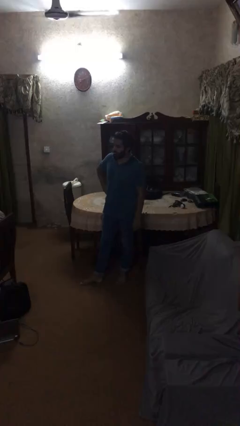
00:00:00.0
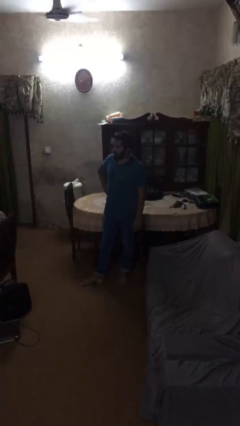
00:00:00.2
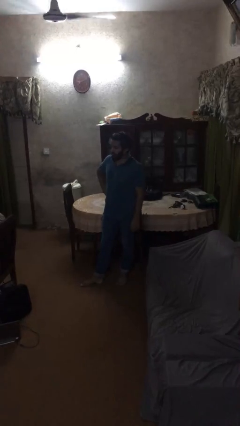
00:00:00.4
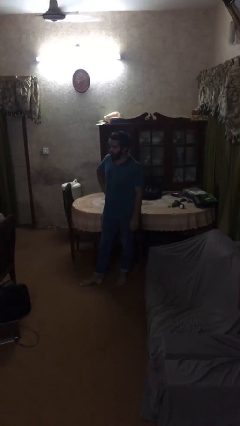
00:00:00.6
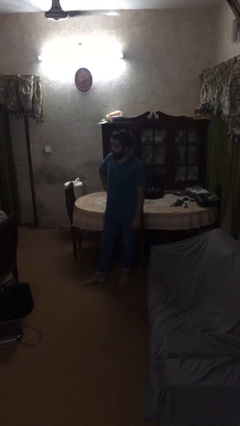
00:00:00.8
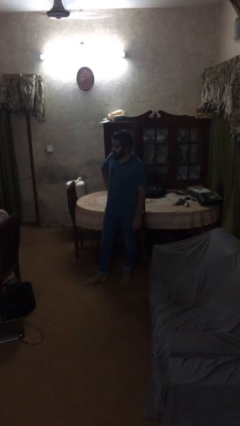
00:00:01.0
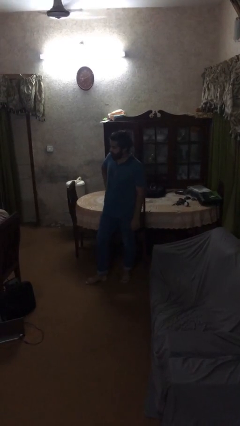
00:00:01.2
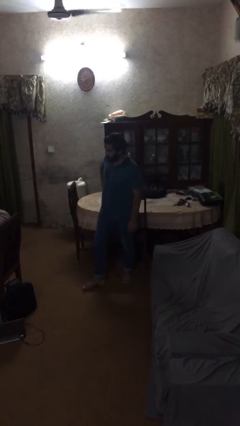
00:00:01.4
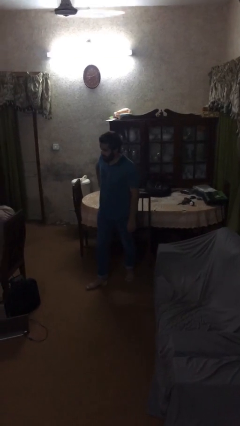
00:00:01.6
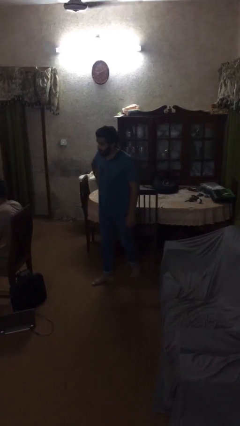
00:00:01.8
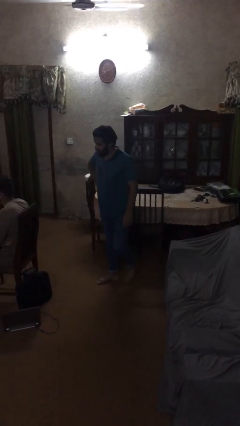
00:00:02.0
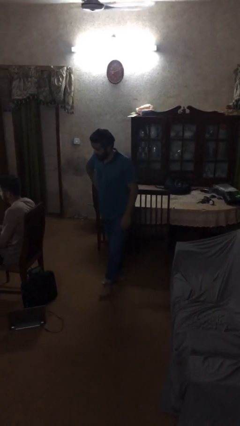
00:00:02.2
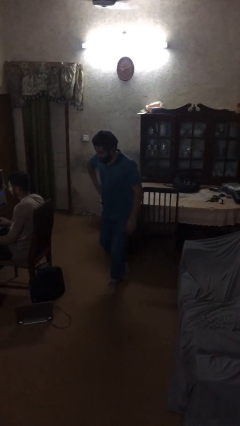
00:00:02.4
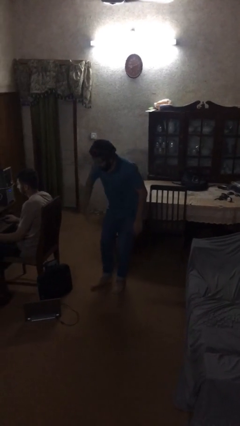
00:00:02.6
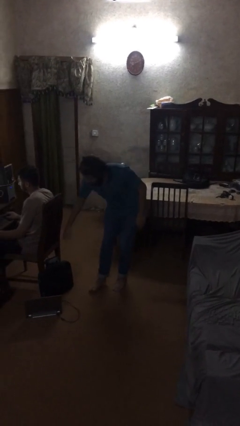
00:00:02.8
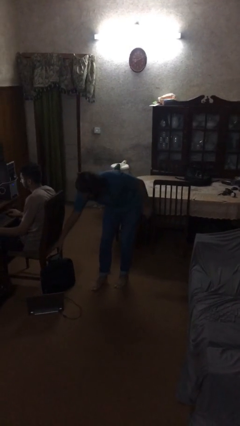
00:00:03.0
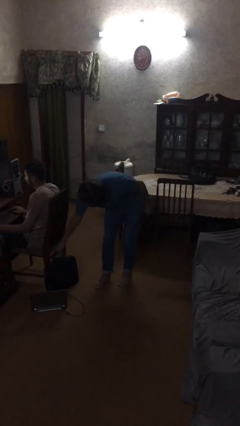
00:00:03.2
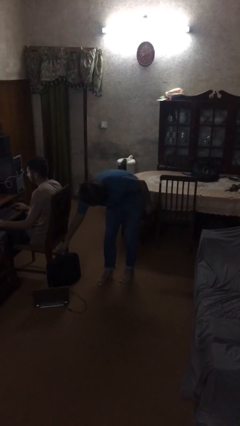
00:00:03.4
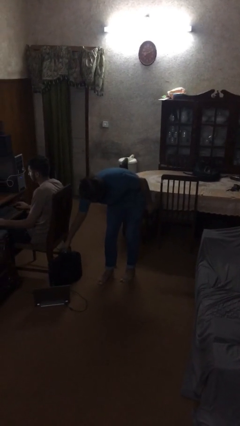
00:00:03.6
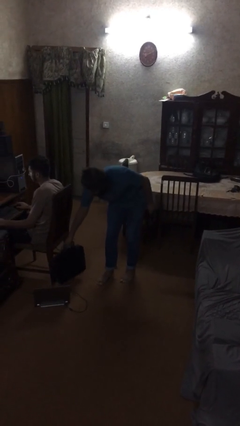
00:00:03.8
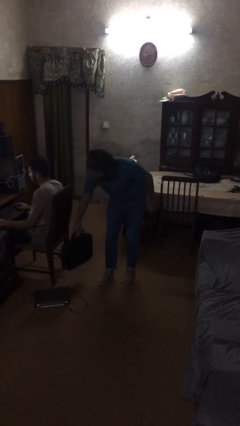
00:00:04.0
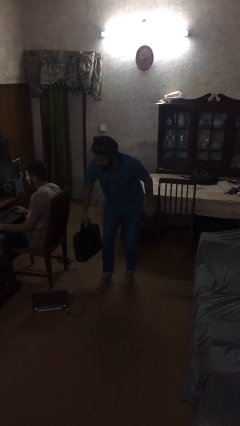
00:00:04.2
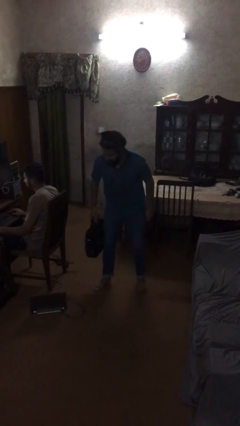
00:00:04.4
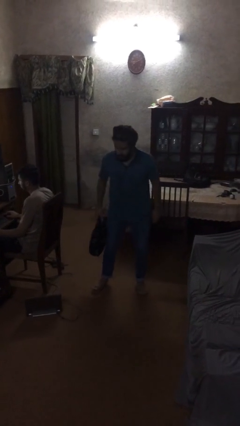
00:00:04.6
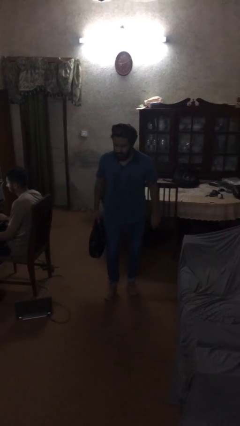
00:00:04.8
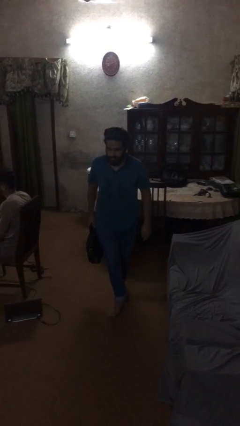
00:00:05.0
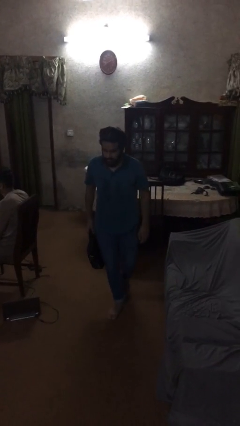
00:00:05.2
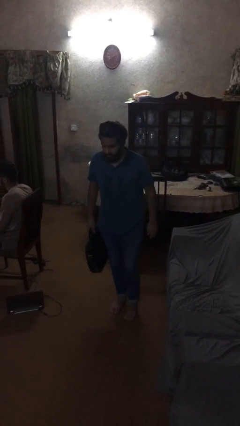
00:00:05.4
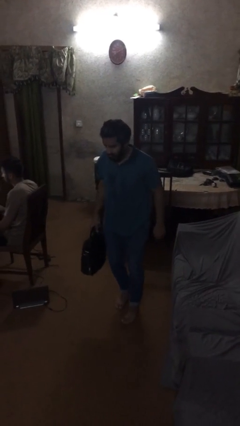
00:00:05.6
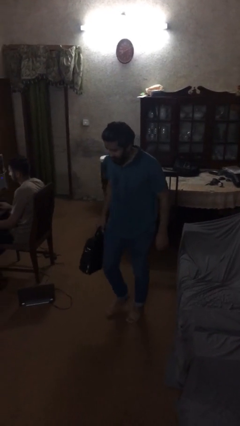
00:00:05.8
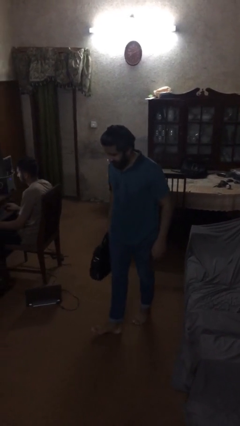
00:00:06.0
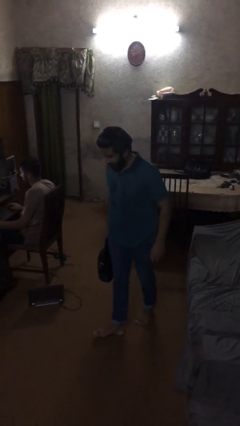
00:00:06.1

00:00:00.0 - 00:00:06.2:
person steals object from person

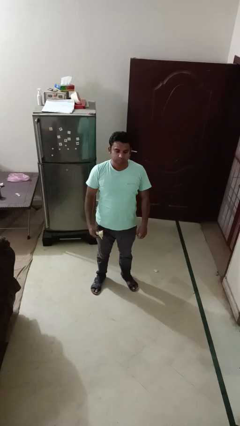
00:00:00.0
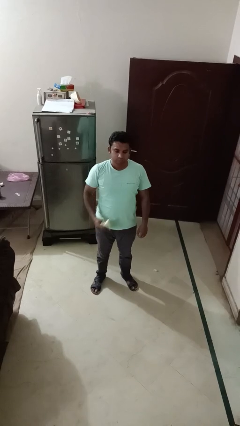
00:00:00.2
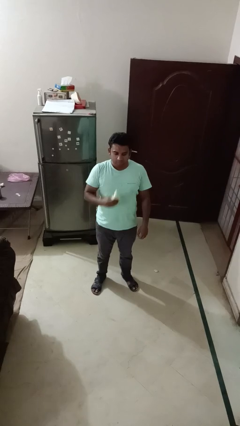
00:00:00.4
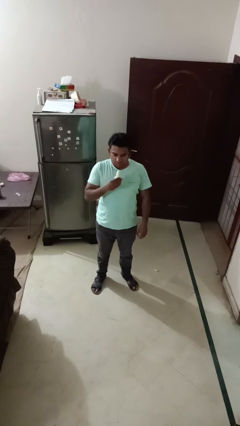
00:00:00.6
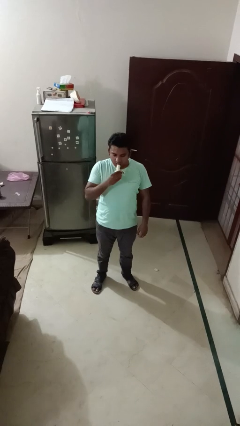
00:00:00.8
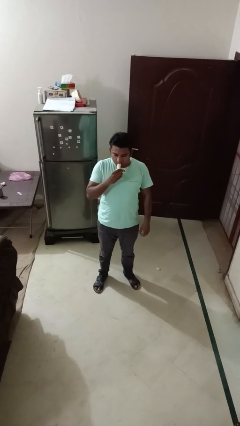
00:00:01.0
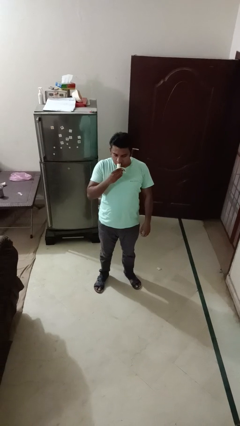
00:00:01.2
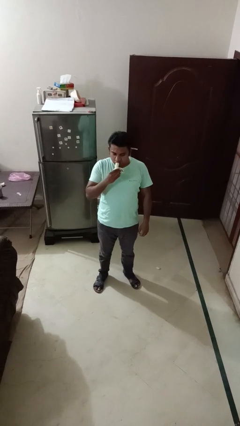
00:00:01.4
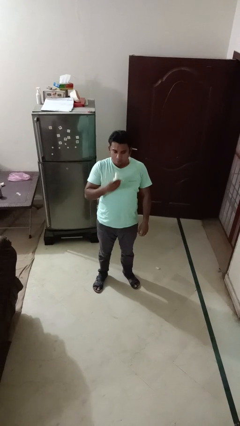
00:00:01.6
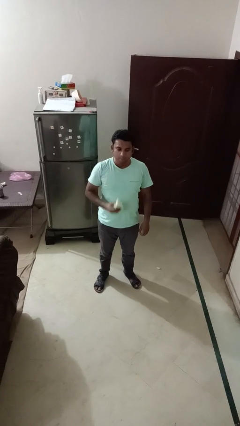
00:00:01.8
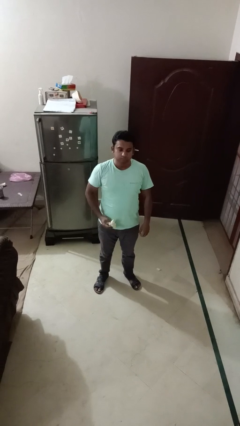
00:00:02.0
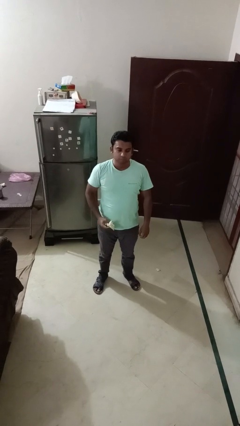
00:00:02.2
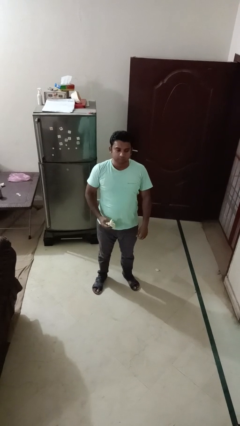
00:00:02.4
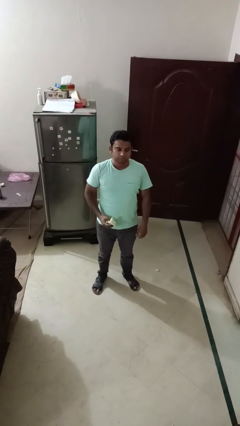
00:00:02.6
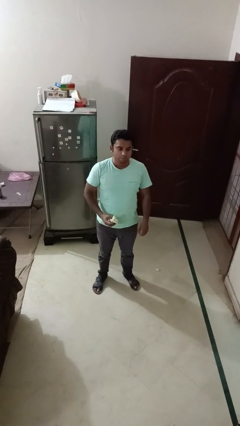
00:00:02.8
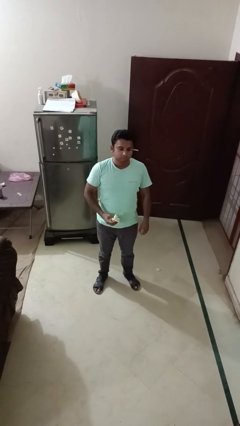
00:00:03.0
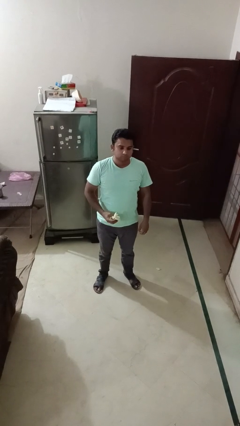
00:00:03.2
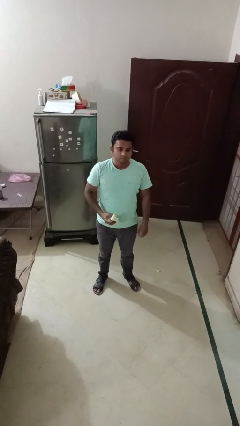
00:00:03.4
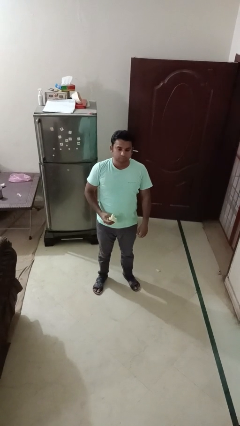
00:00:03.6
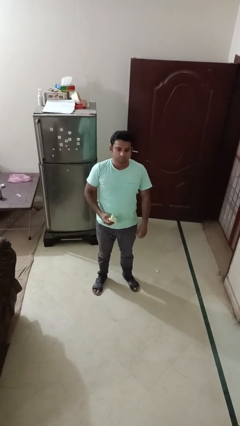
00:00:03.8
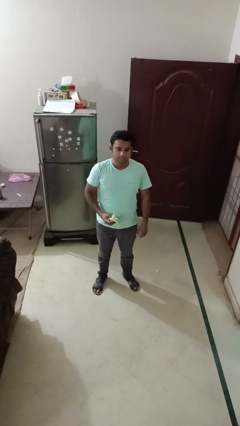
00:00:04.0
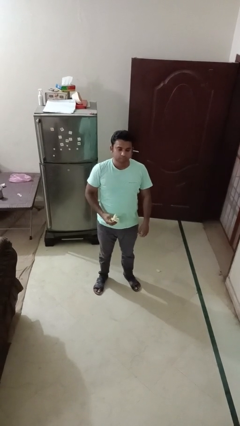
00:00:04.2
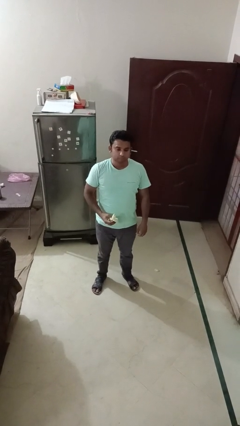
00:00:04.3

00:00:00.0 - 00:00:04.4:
person eats banana

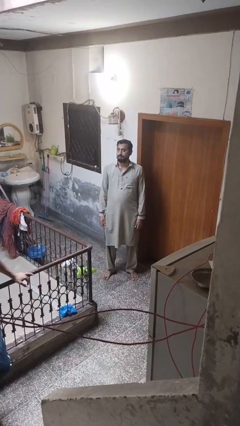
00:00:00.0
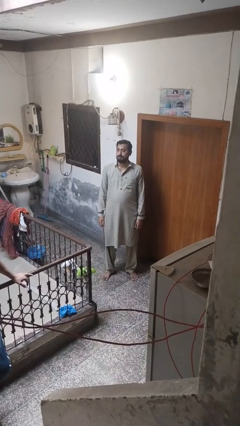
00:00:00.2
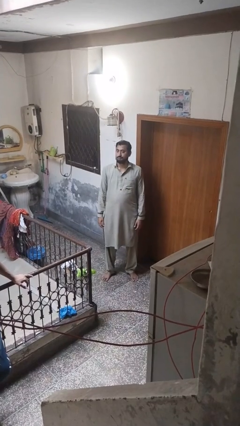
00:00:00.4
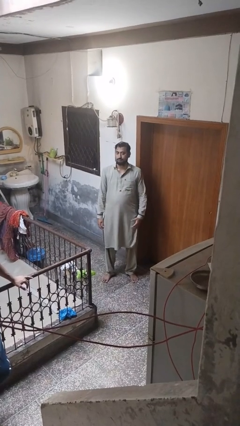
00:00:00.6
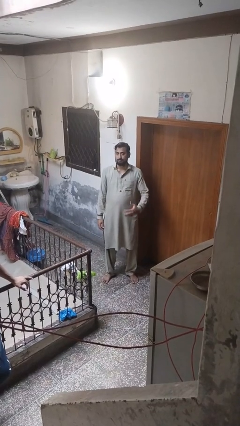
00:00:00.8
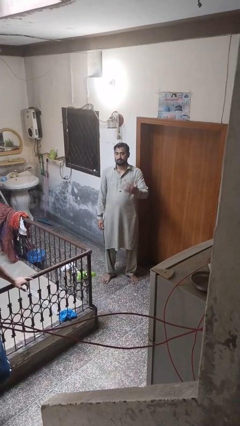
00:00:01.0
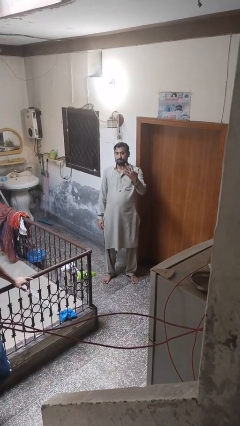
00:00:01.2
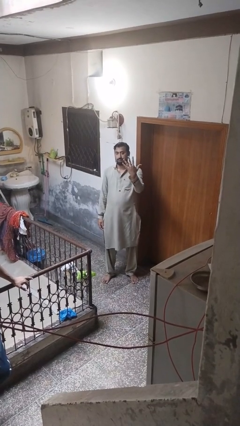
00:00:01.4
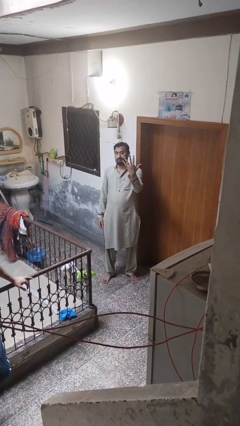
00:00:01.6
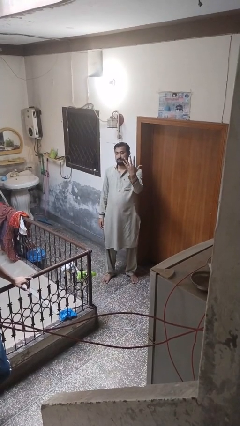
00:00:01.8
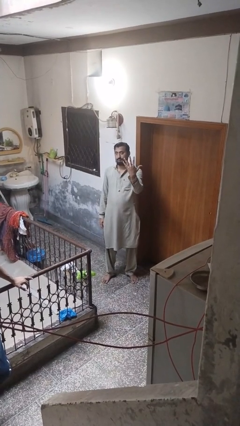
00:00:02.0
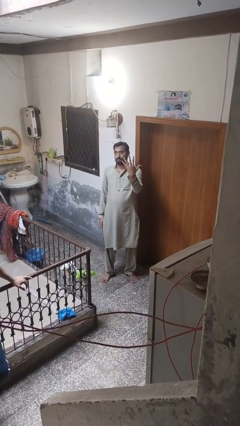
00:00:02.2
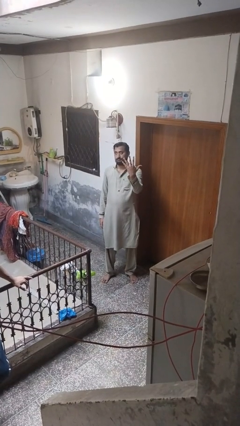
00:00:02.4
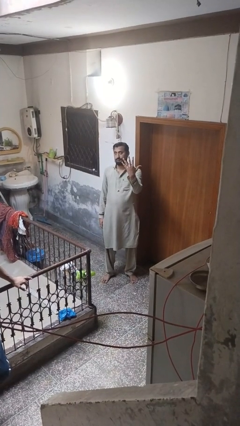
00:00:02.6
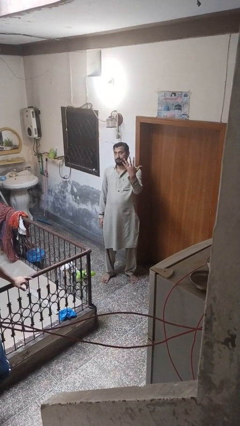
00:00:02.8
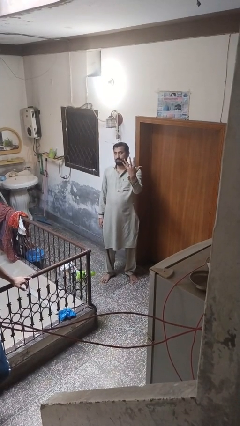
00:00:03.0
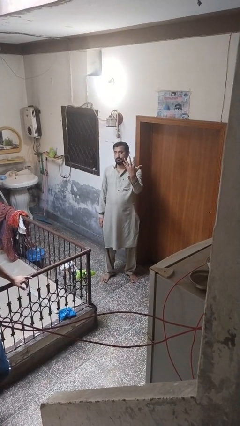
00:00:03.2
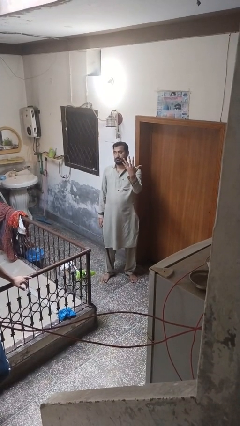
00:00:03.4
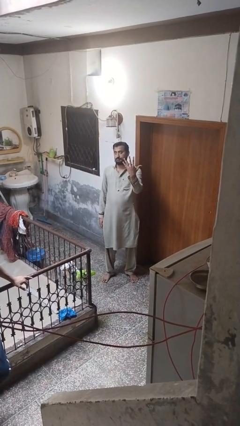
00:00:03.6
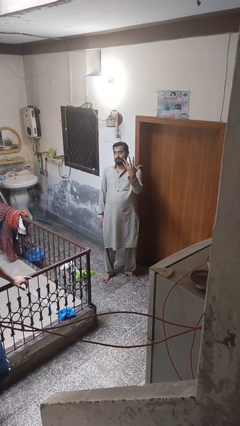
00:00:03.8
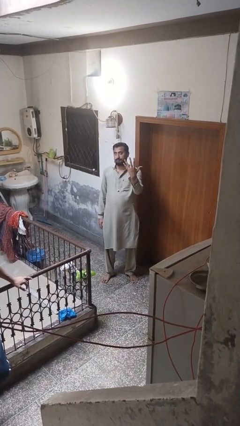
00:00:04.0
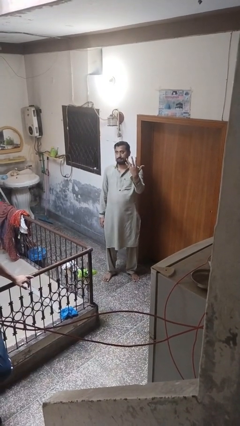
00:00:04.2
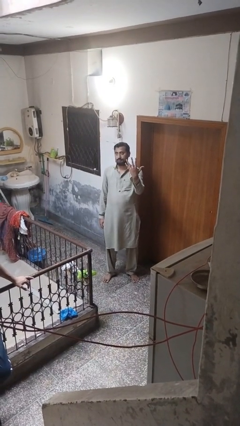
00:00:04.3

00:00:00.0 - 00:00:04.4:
person gestures number five

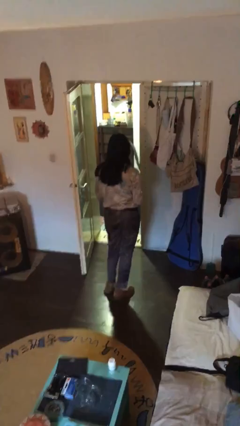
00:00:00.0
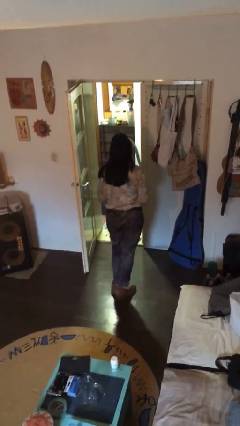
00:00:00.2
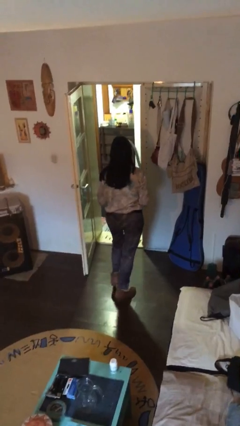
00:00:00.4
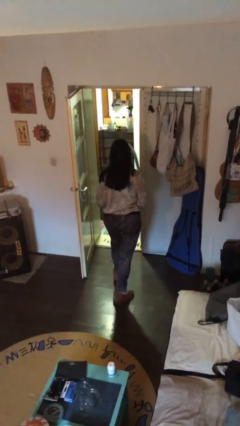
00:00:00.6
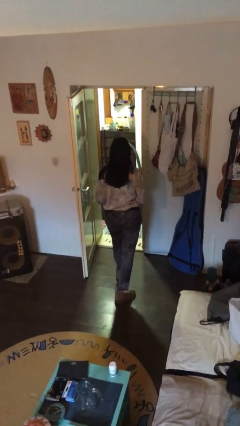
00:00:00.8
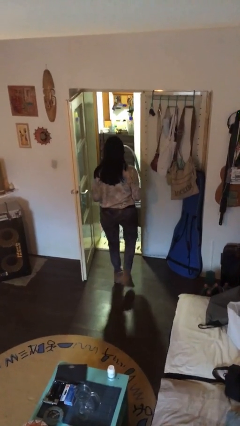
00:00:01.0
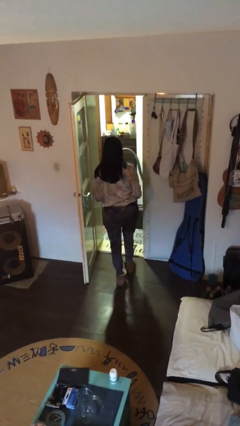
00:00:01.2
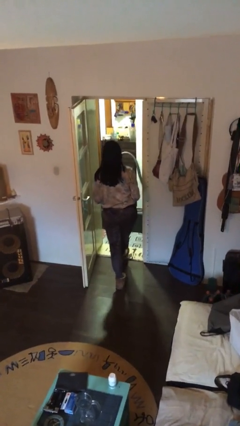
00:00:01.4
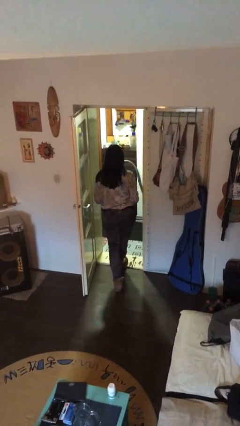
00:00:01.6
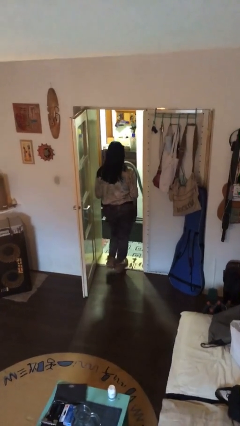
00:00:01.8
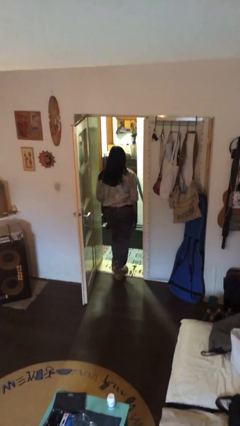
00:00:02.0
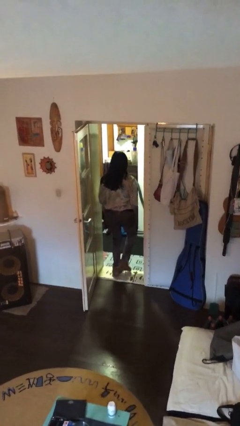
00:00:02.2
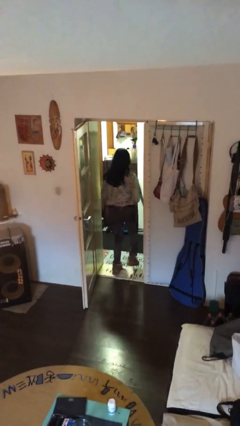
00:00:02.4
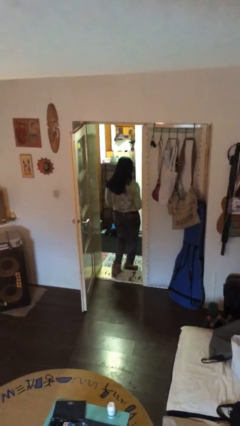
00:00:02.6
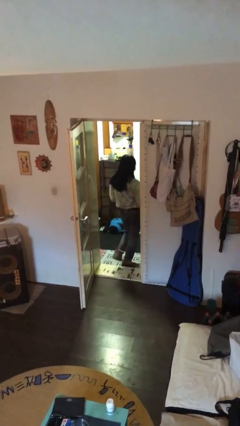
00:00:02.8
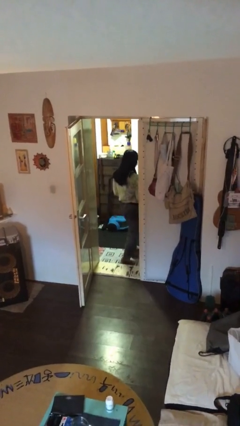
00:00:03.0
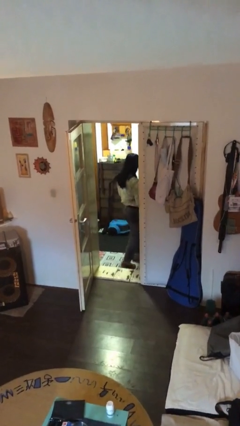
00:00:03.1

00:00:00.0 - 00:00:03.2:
person exits scene through structure
